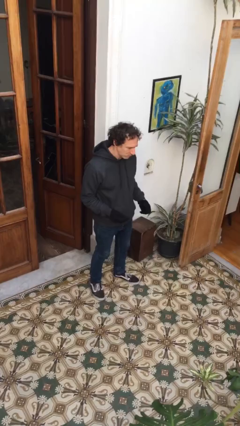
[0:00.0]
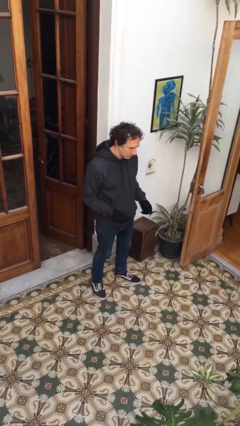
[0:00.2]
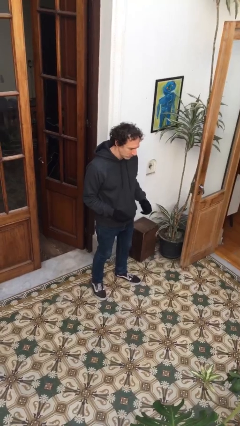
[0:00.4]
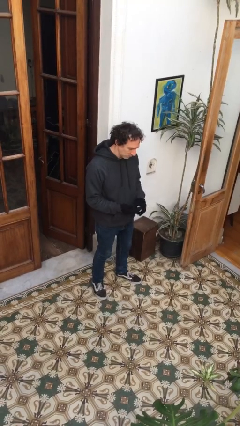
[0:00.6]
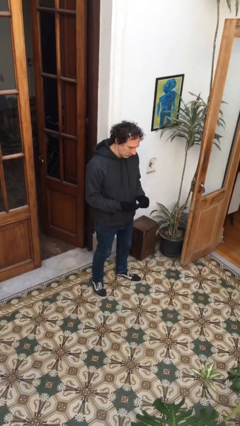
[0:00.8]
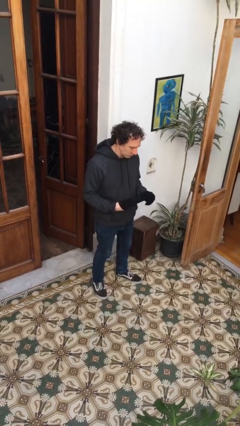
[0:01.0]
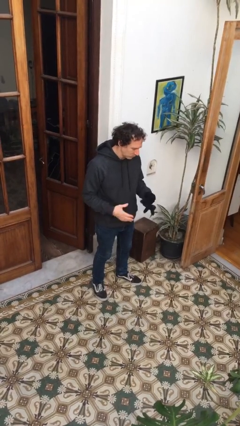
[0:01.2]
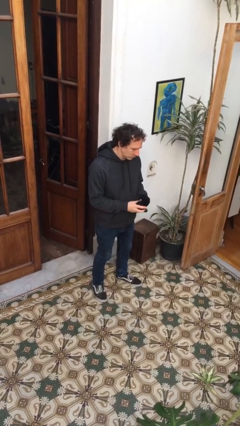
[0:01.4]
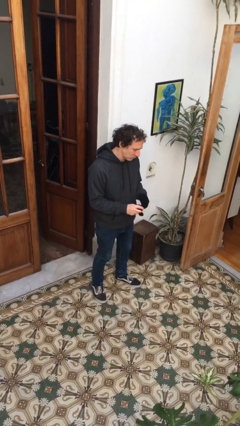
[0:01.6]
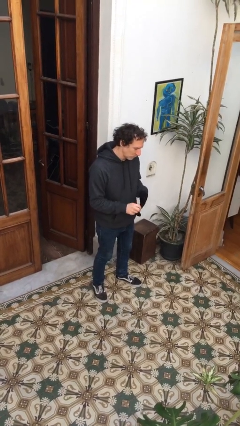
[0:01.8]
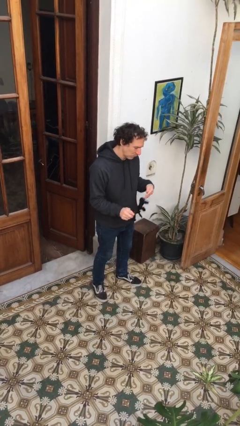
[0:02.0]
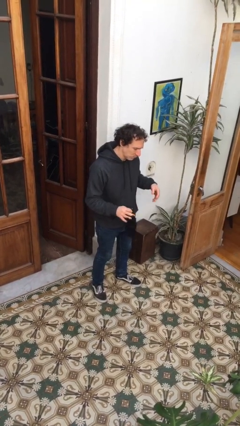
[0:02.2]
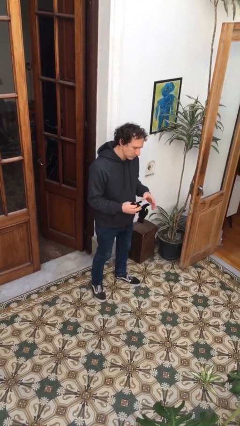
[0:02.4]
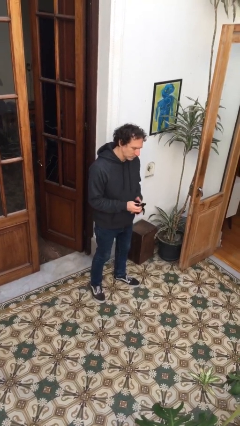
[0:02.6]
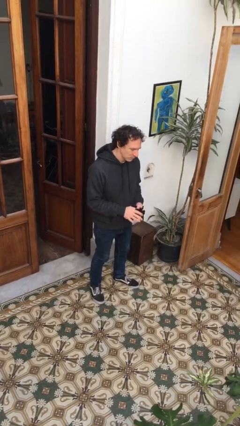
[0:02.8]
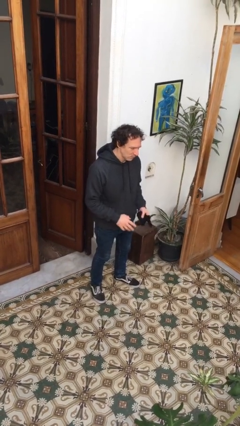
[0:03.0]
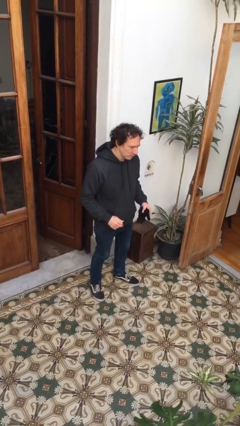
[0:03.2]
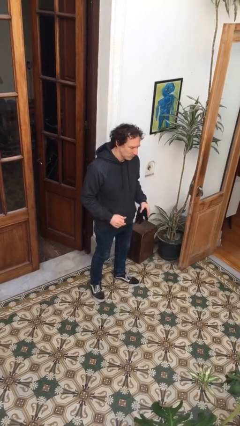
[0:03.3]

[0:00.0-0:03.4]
person takes off gloves

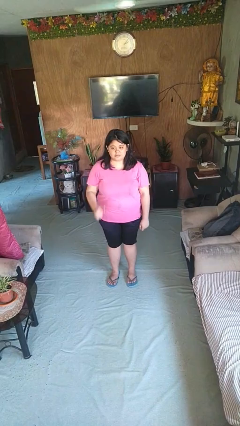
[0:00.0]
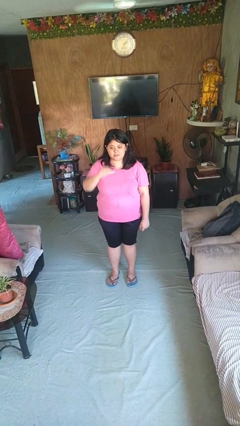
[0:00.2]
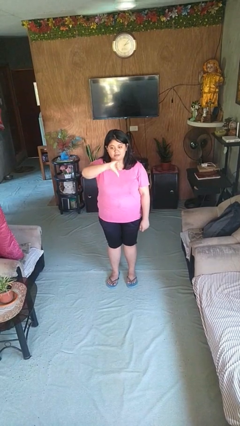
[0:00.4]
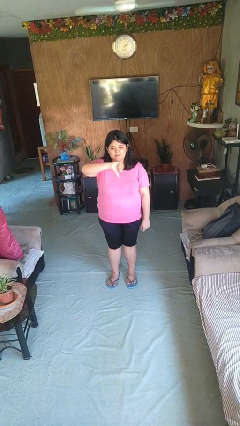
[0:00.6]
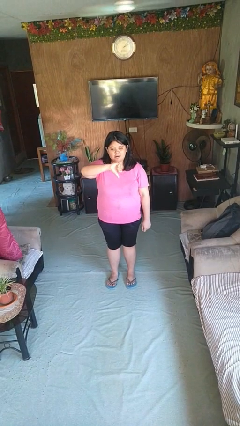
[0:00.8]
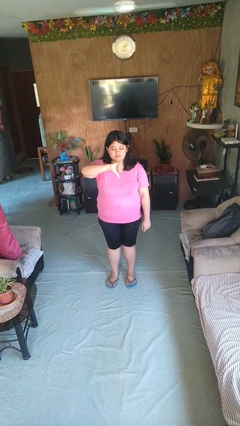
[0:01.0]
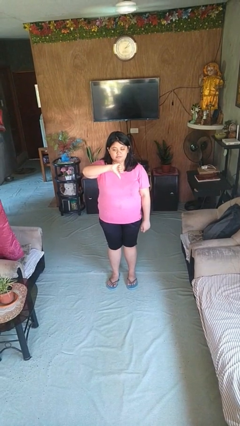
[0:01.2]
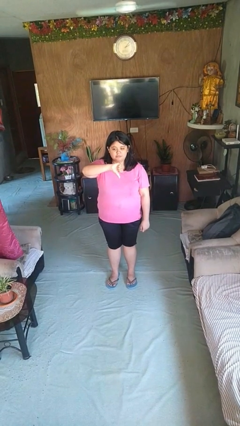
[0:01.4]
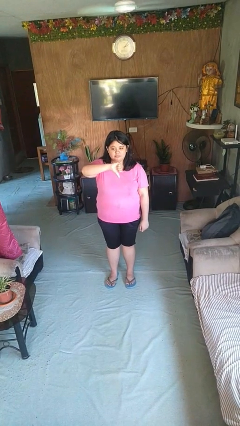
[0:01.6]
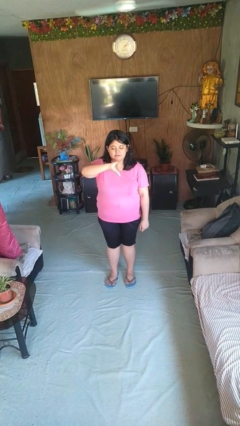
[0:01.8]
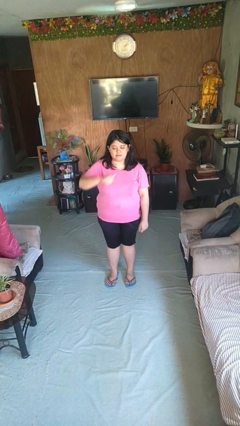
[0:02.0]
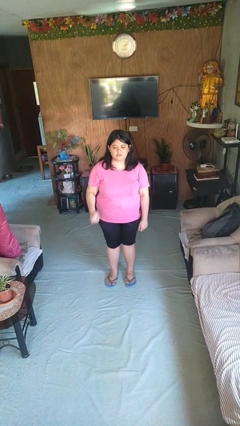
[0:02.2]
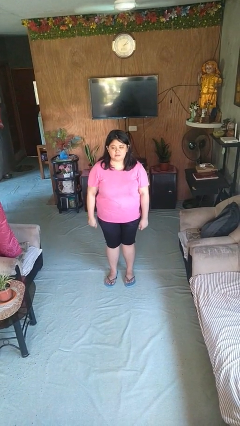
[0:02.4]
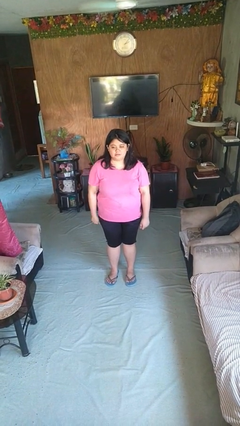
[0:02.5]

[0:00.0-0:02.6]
person gestures thumbs down

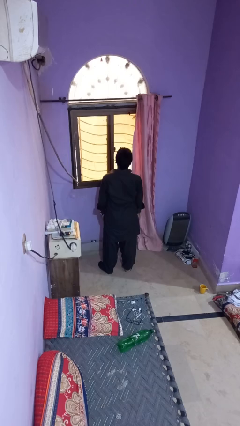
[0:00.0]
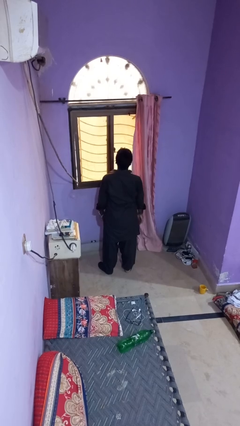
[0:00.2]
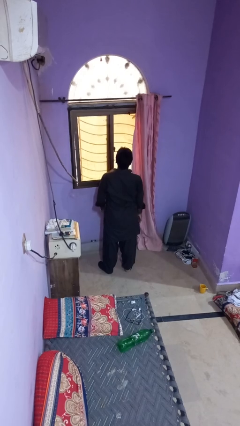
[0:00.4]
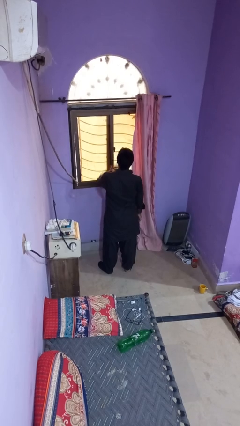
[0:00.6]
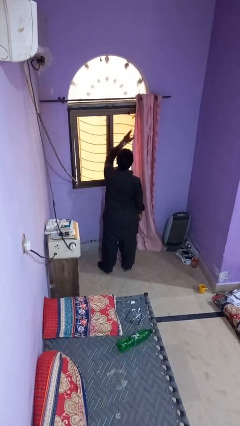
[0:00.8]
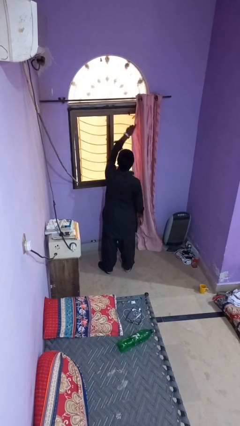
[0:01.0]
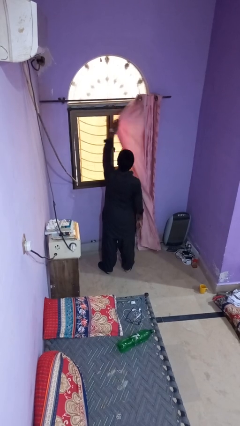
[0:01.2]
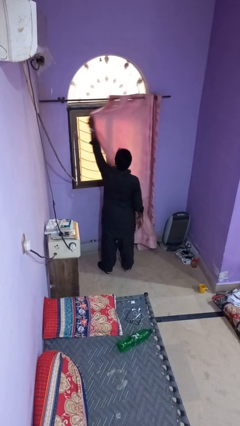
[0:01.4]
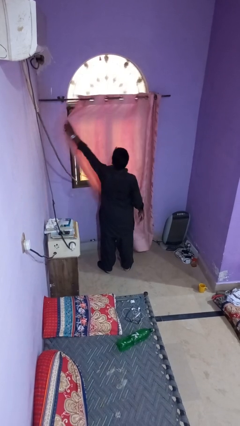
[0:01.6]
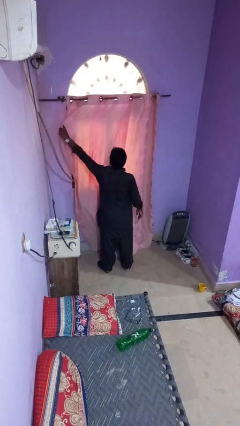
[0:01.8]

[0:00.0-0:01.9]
person closes curtains

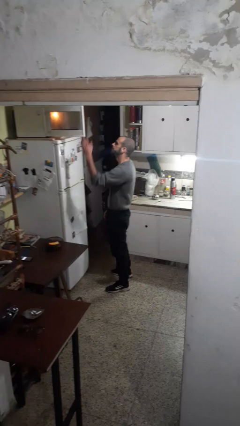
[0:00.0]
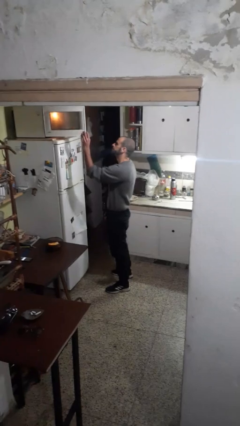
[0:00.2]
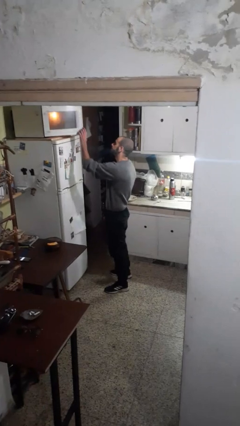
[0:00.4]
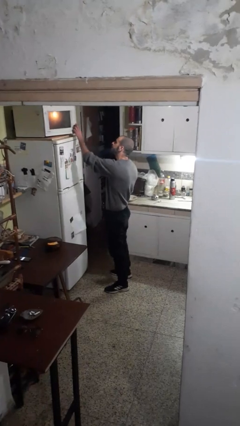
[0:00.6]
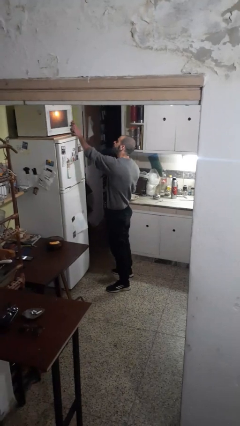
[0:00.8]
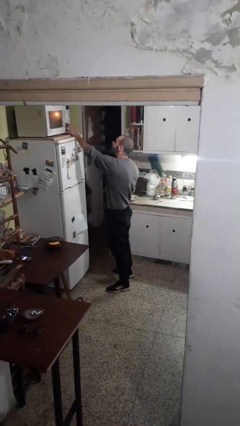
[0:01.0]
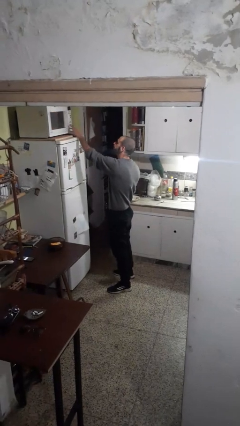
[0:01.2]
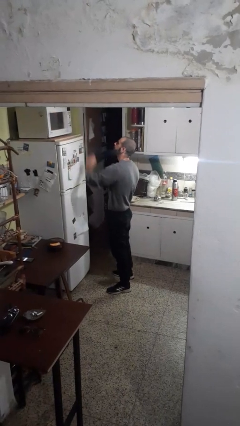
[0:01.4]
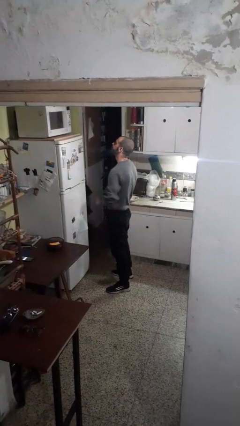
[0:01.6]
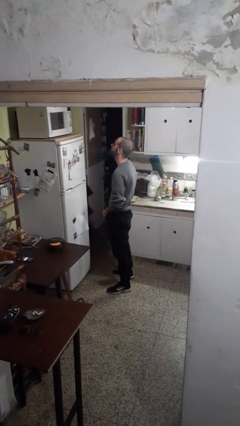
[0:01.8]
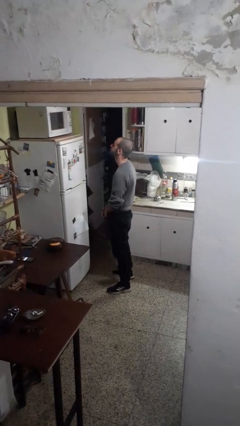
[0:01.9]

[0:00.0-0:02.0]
person closes microwave

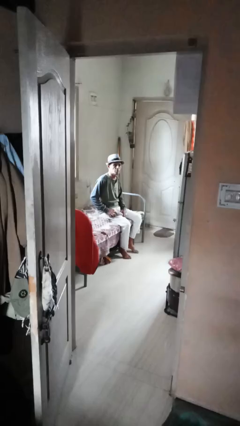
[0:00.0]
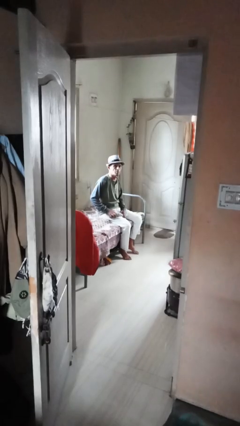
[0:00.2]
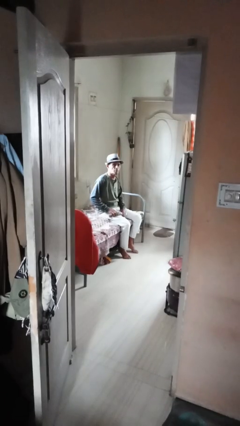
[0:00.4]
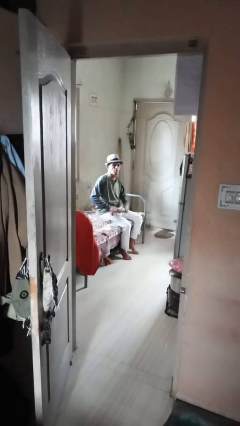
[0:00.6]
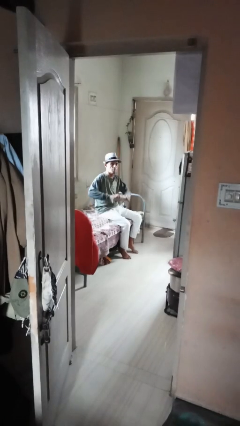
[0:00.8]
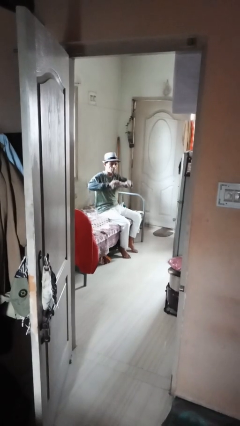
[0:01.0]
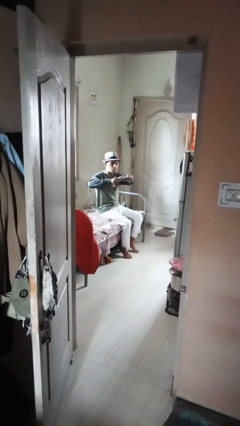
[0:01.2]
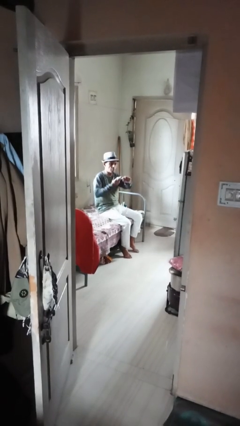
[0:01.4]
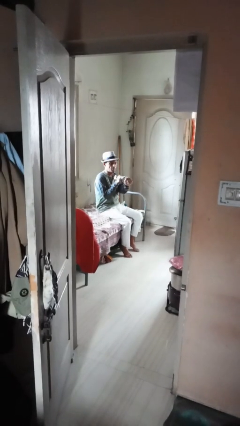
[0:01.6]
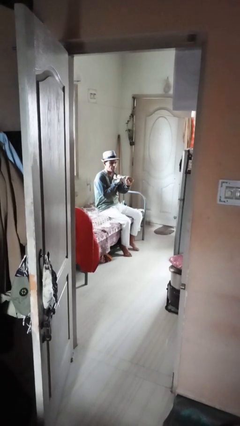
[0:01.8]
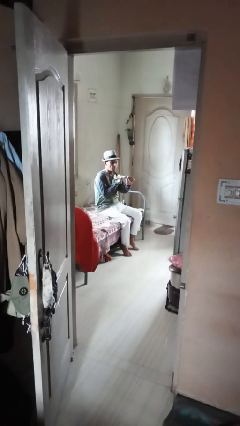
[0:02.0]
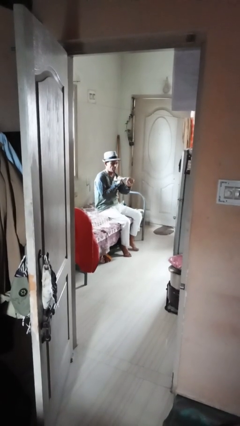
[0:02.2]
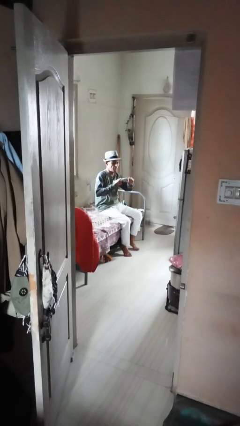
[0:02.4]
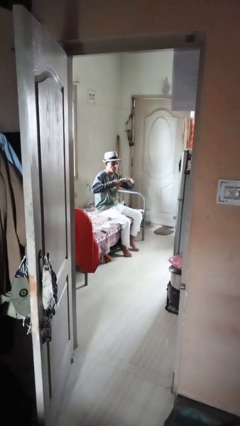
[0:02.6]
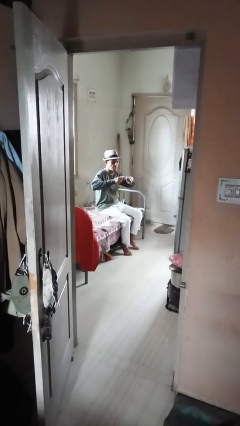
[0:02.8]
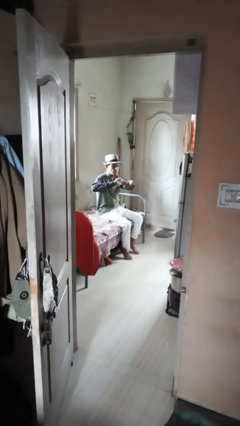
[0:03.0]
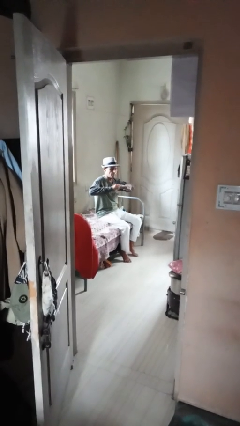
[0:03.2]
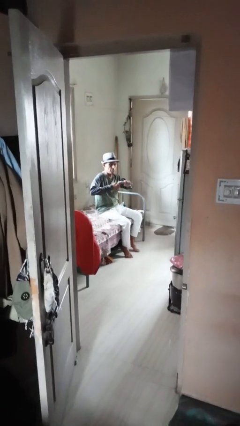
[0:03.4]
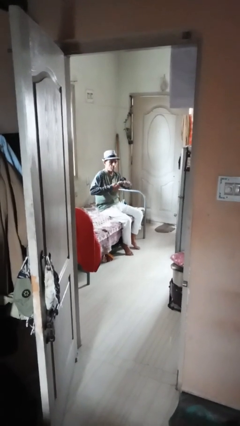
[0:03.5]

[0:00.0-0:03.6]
person squeezes object

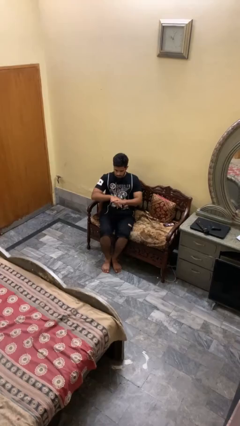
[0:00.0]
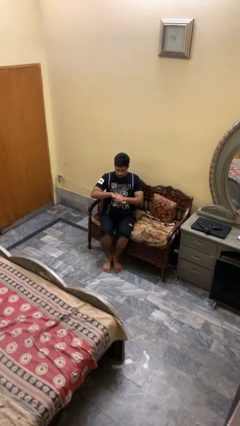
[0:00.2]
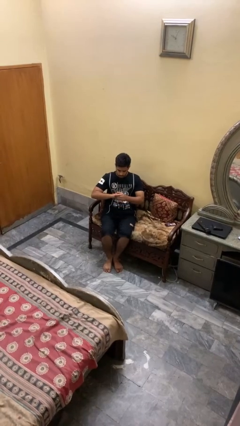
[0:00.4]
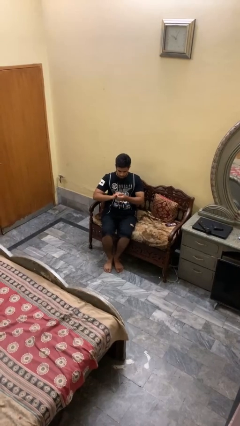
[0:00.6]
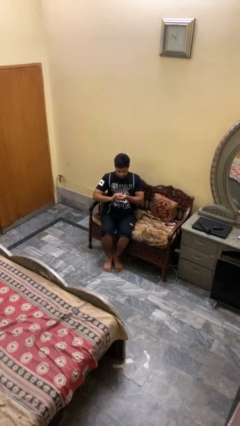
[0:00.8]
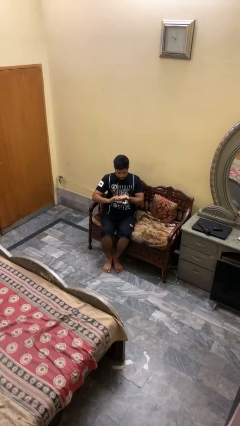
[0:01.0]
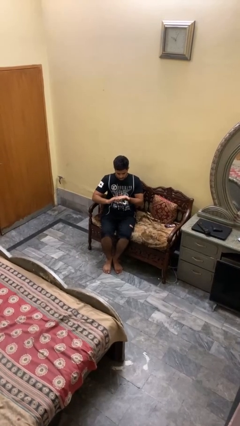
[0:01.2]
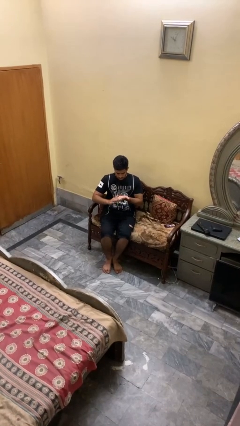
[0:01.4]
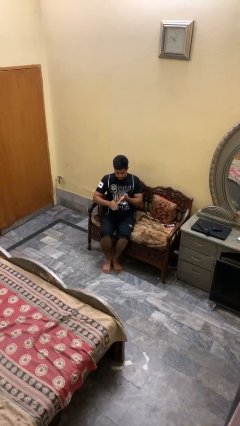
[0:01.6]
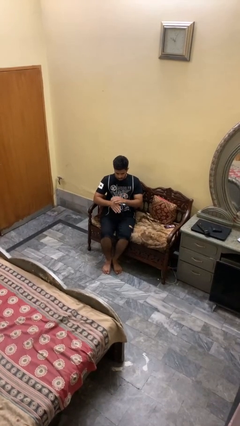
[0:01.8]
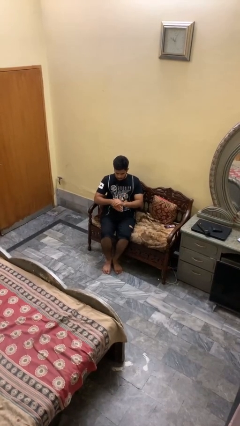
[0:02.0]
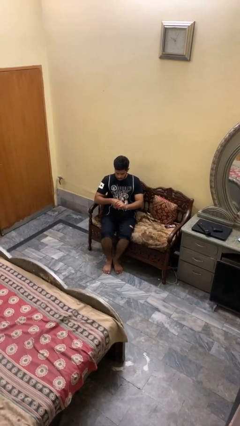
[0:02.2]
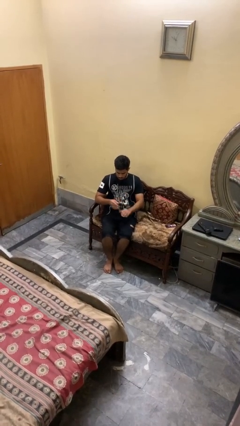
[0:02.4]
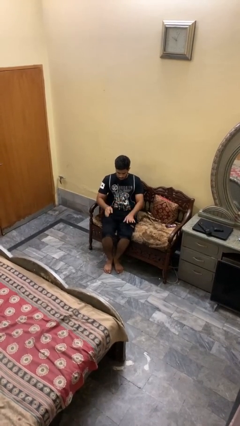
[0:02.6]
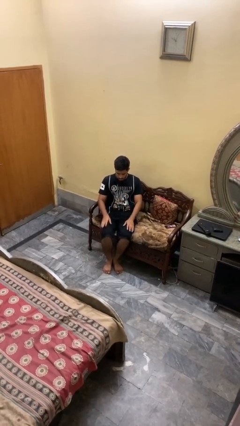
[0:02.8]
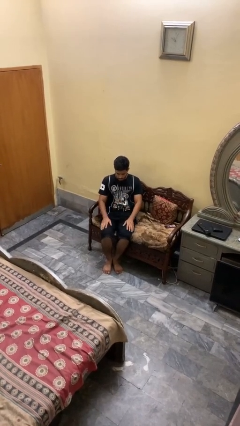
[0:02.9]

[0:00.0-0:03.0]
person looks at hands in lap

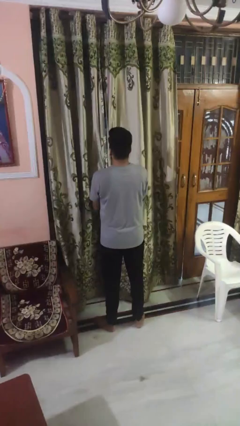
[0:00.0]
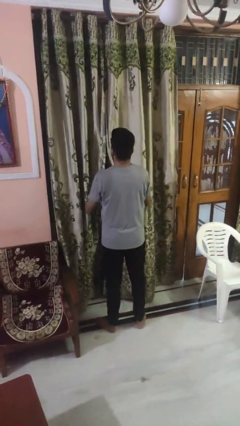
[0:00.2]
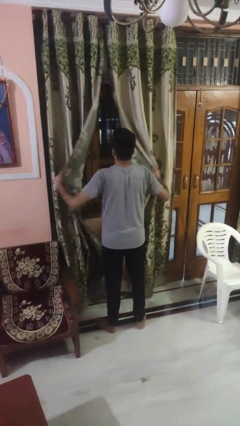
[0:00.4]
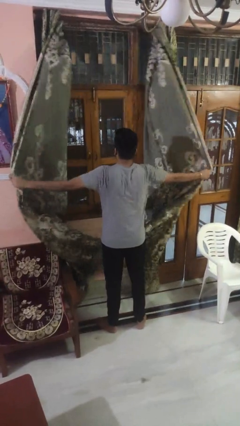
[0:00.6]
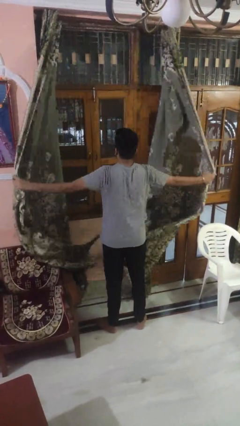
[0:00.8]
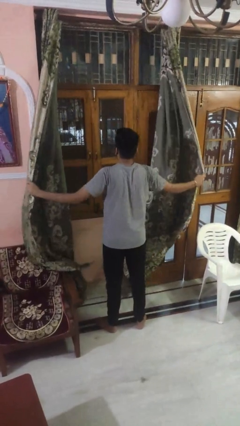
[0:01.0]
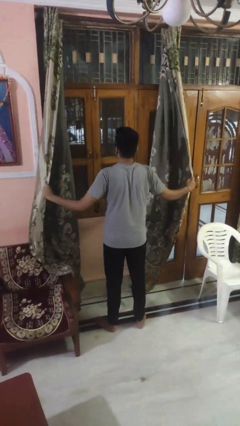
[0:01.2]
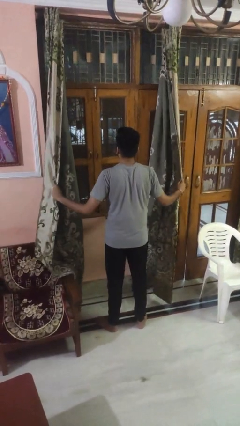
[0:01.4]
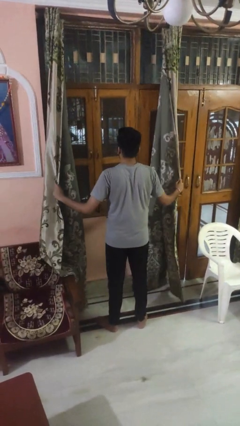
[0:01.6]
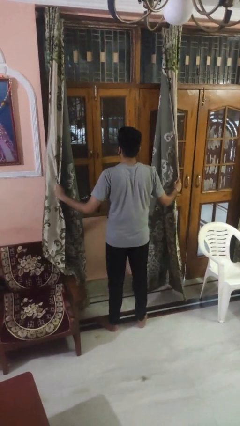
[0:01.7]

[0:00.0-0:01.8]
person opens curtains
